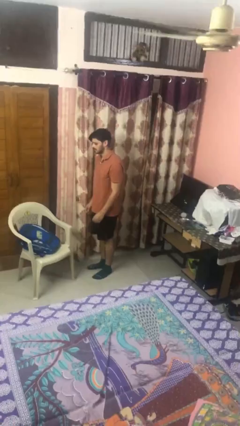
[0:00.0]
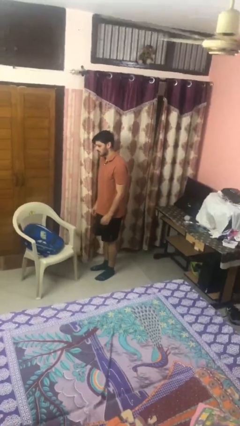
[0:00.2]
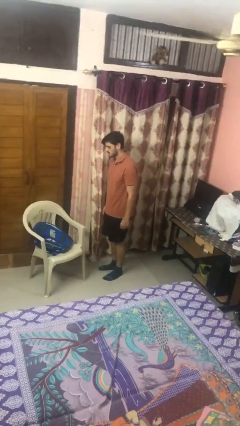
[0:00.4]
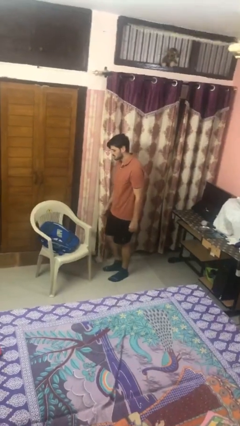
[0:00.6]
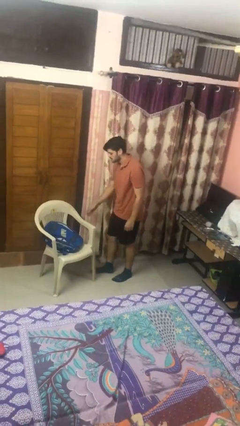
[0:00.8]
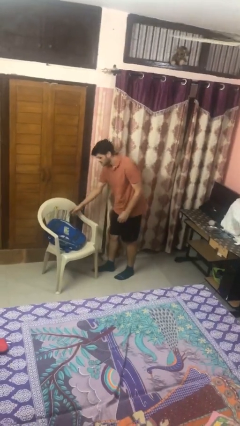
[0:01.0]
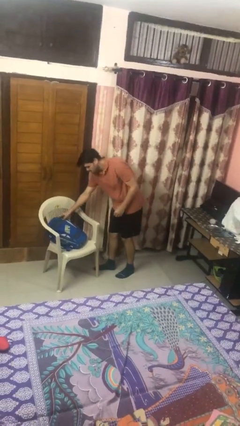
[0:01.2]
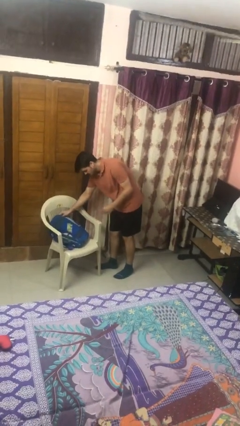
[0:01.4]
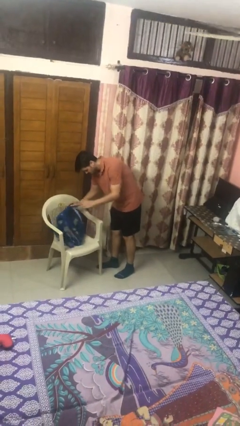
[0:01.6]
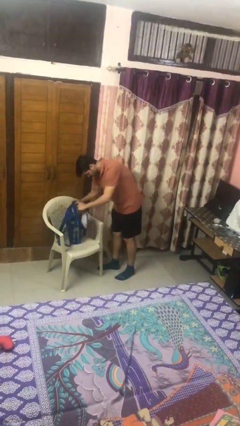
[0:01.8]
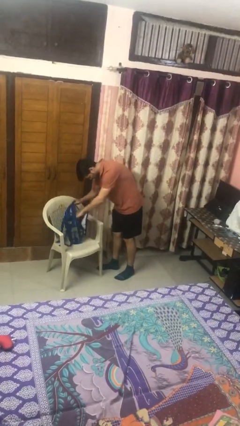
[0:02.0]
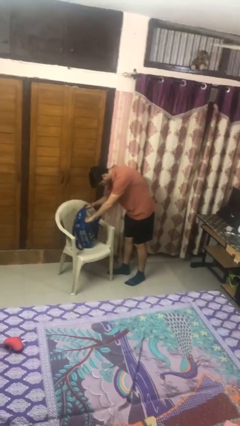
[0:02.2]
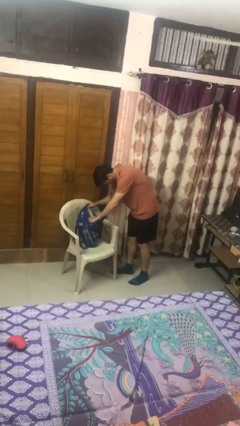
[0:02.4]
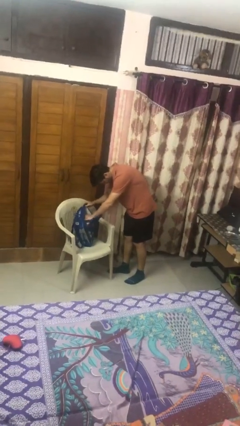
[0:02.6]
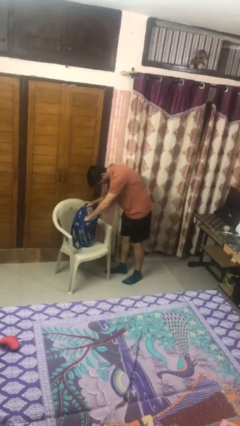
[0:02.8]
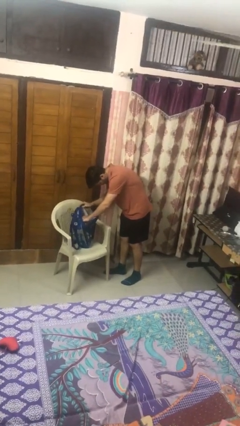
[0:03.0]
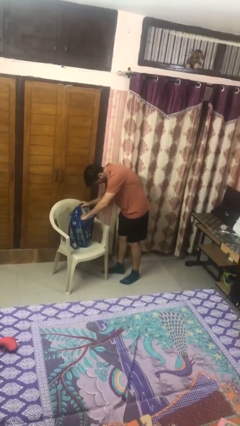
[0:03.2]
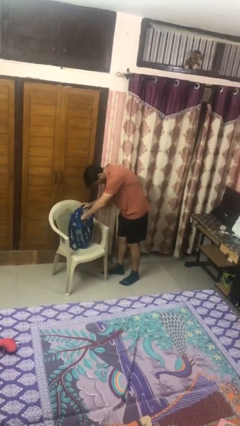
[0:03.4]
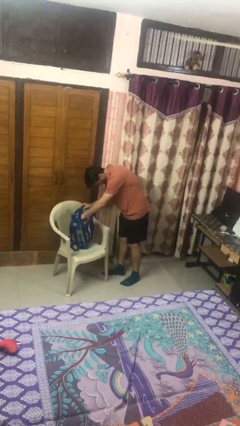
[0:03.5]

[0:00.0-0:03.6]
person searches in bag

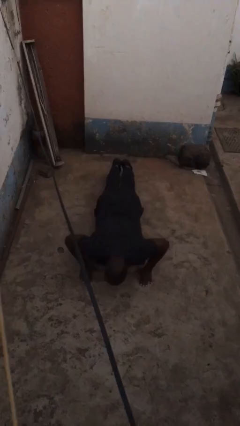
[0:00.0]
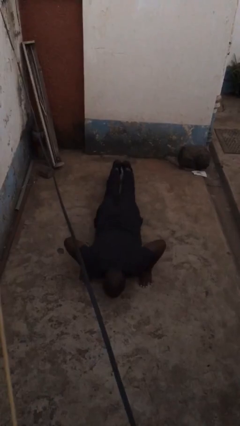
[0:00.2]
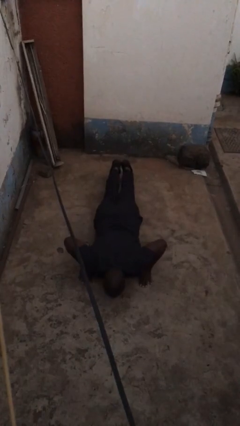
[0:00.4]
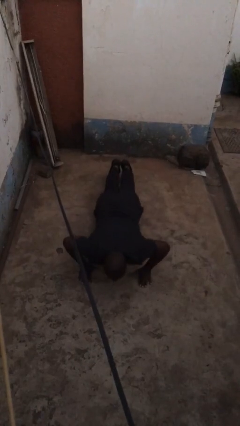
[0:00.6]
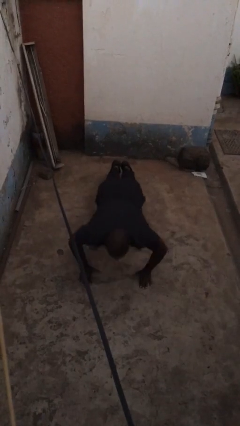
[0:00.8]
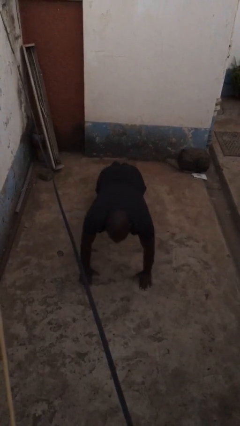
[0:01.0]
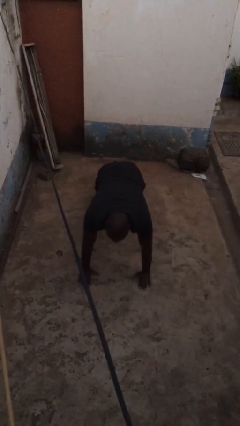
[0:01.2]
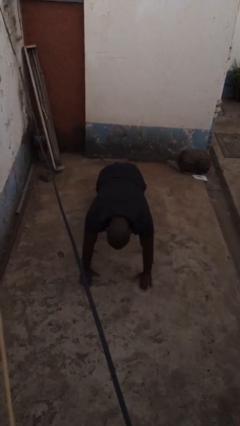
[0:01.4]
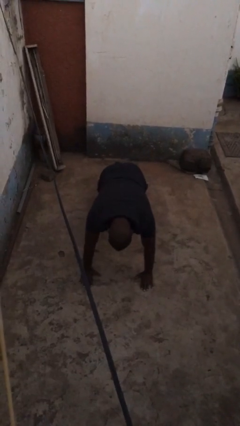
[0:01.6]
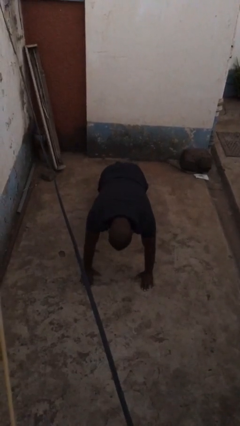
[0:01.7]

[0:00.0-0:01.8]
person exercises with pushup

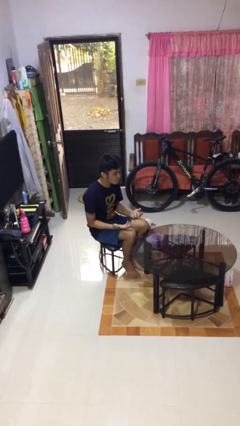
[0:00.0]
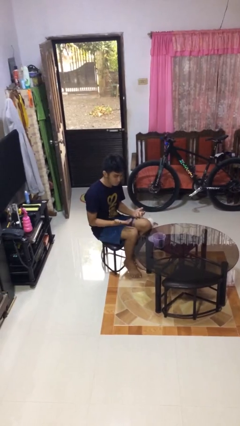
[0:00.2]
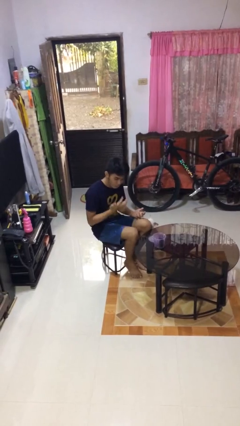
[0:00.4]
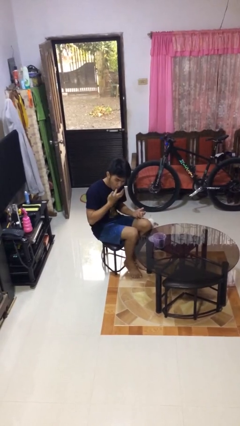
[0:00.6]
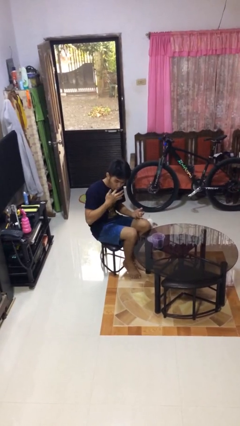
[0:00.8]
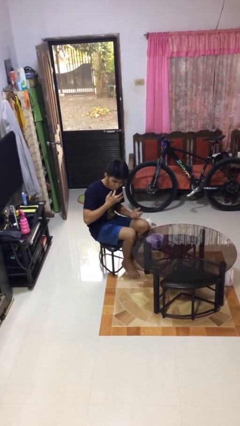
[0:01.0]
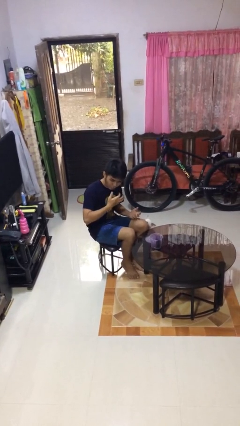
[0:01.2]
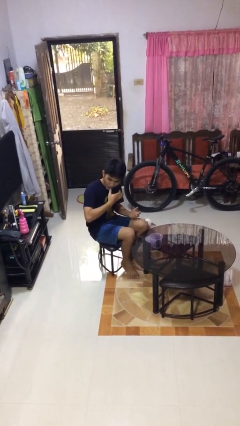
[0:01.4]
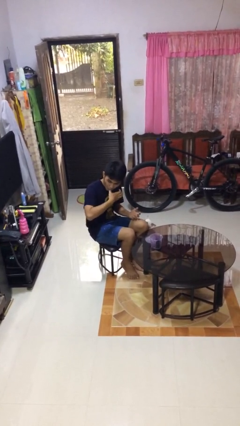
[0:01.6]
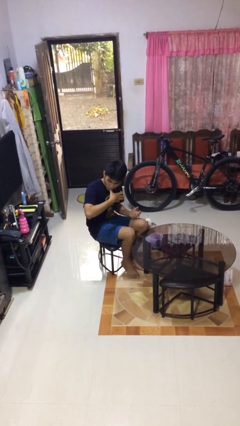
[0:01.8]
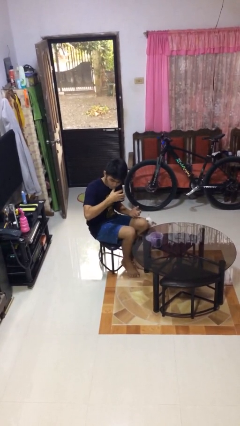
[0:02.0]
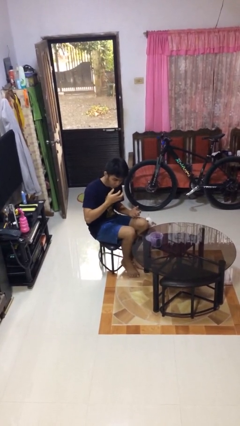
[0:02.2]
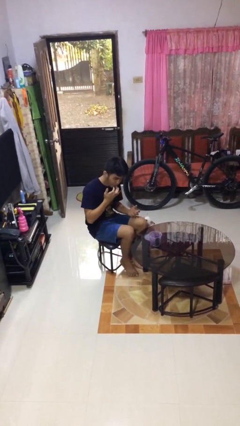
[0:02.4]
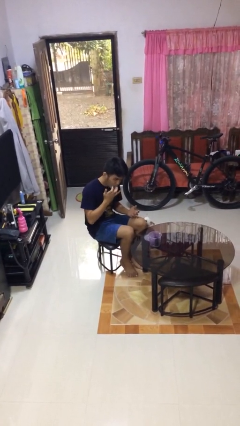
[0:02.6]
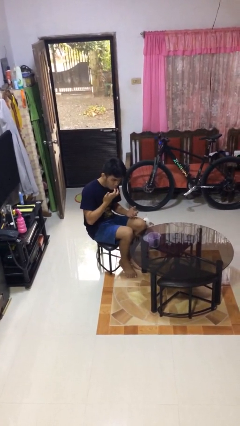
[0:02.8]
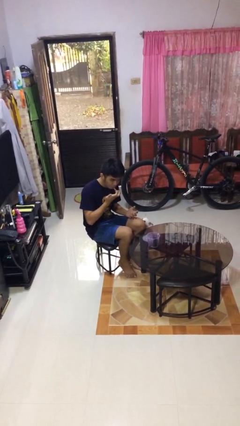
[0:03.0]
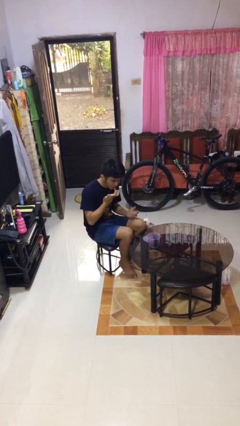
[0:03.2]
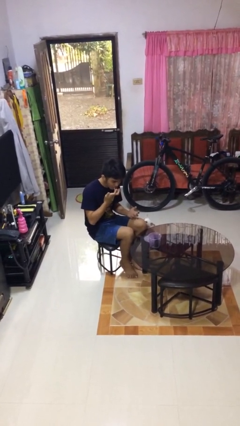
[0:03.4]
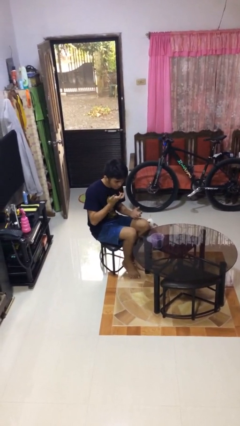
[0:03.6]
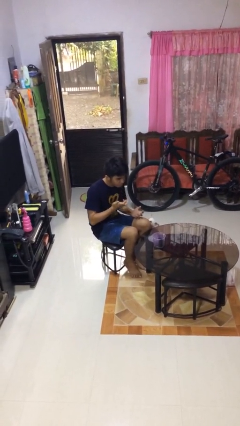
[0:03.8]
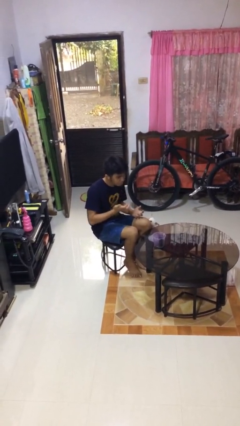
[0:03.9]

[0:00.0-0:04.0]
person licks fingers

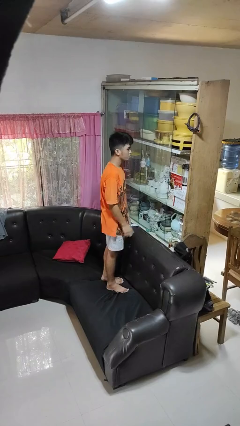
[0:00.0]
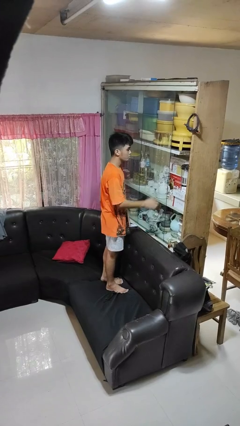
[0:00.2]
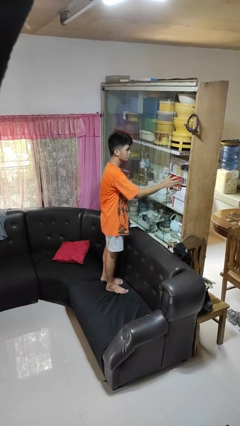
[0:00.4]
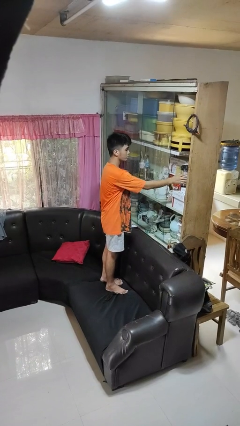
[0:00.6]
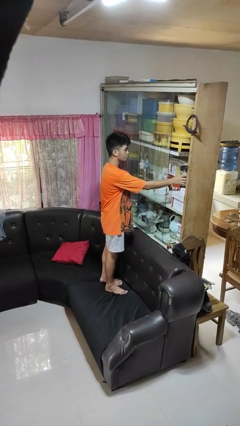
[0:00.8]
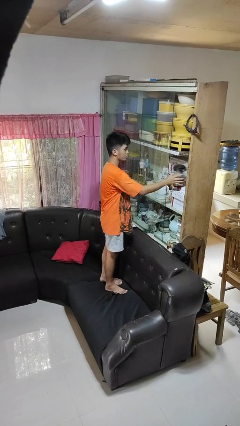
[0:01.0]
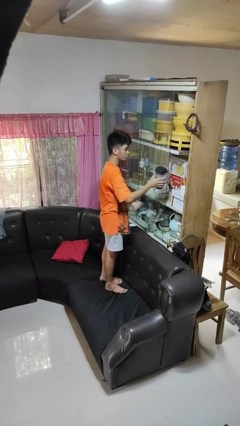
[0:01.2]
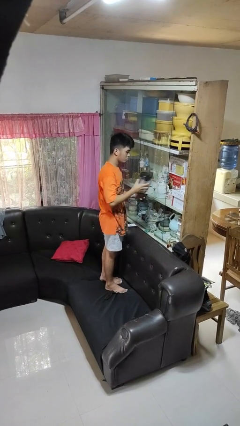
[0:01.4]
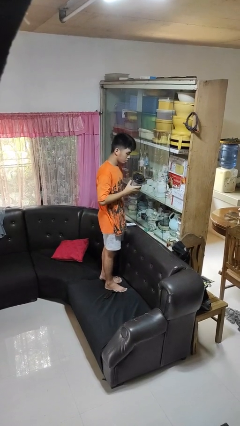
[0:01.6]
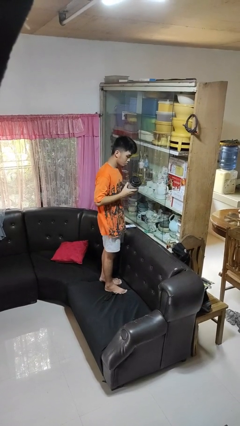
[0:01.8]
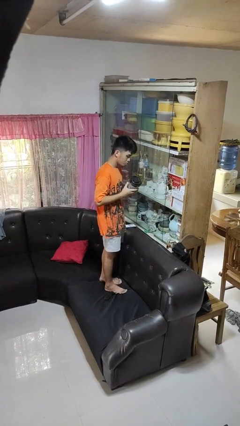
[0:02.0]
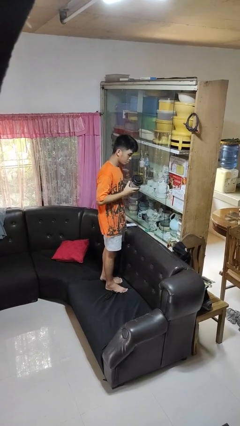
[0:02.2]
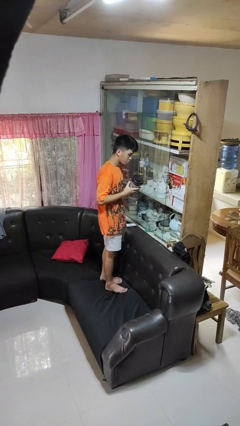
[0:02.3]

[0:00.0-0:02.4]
person picks up object from cabinet

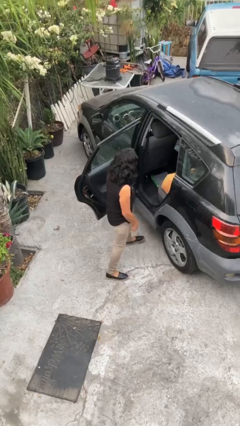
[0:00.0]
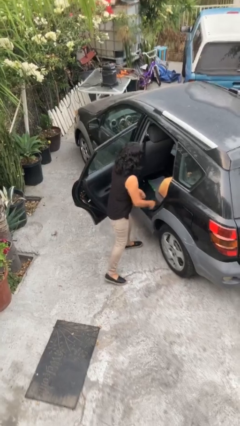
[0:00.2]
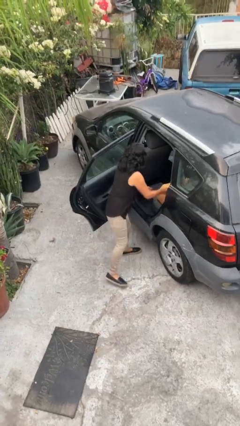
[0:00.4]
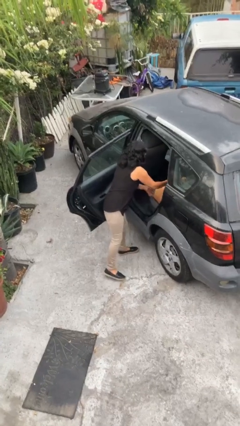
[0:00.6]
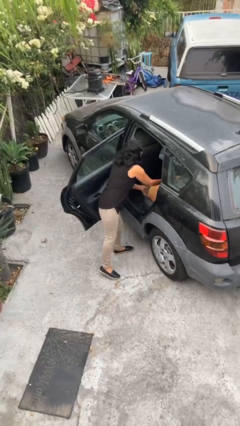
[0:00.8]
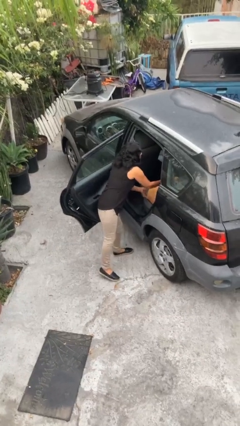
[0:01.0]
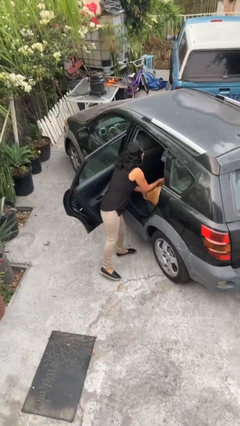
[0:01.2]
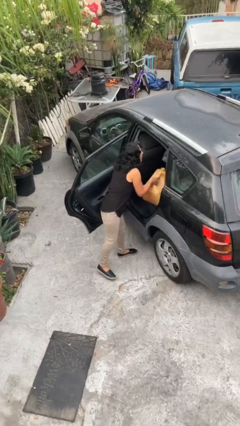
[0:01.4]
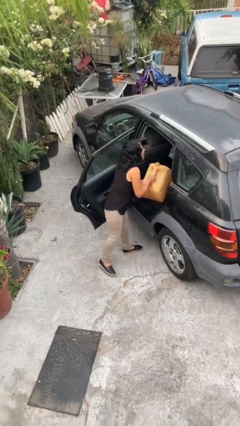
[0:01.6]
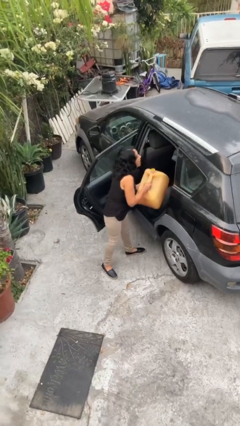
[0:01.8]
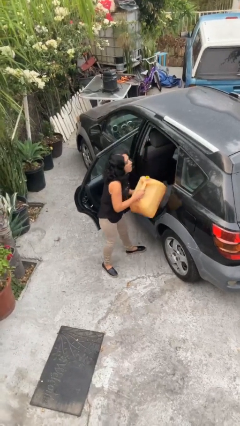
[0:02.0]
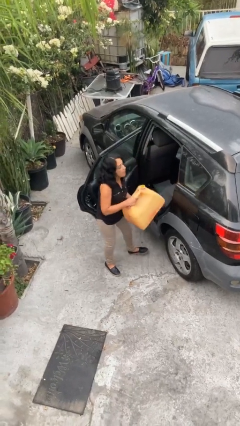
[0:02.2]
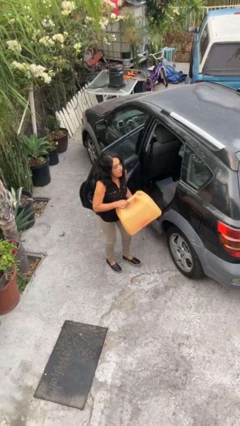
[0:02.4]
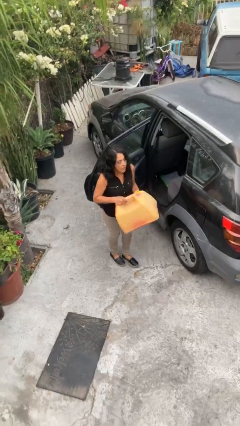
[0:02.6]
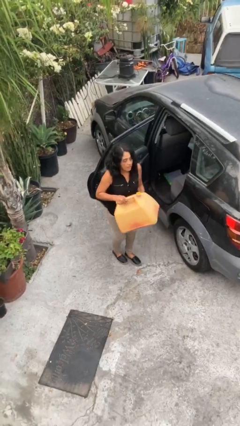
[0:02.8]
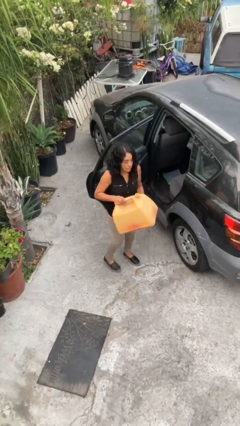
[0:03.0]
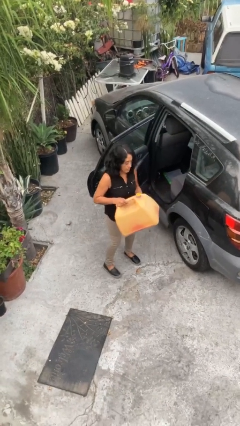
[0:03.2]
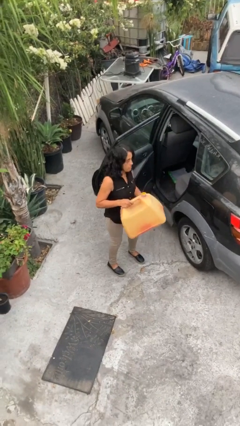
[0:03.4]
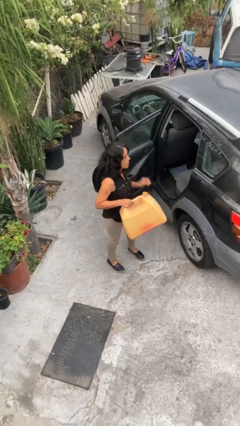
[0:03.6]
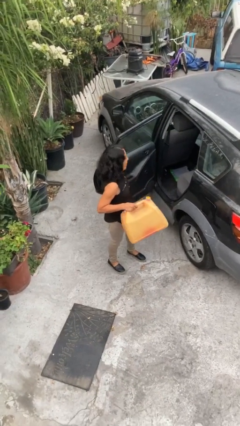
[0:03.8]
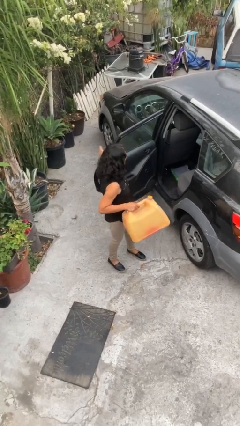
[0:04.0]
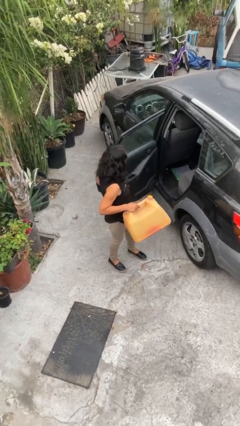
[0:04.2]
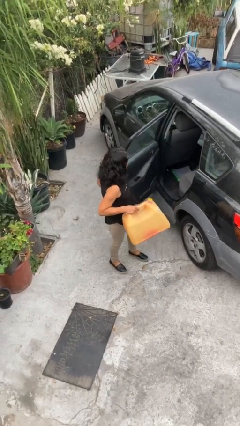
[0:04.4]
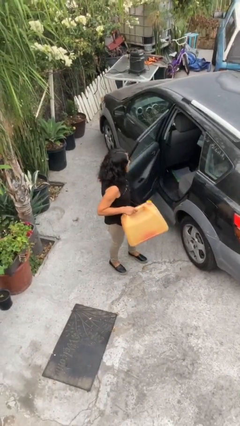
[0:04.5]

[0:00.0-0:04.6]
person unloads car

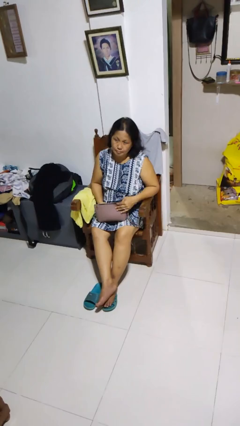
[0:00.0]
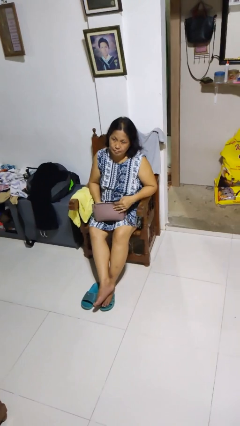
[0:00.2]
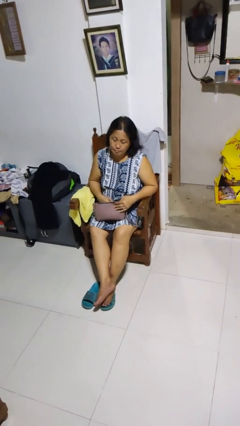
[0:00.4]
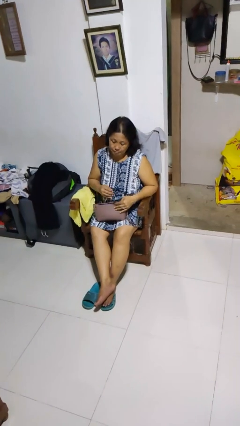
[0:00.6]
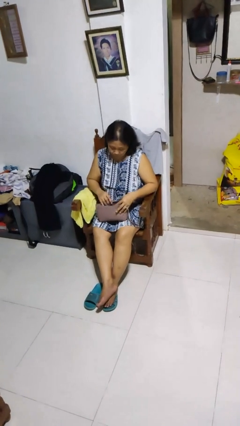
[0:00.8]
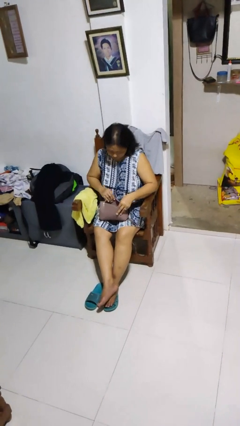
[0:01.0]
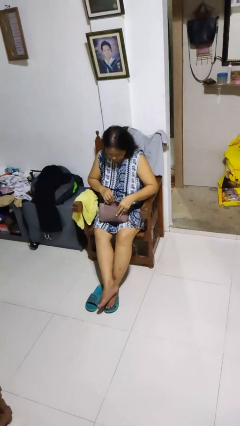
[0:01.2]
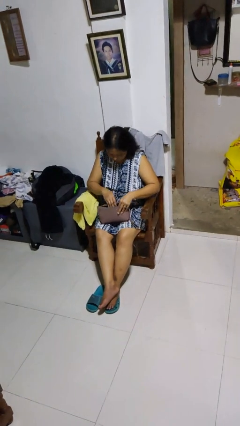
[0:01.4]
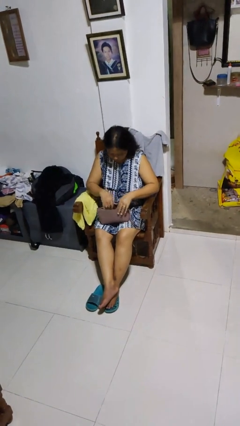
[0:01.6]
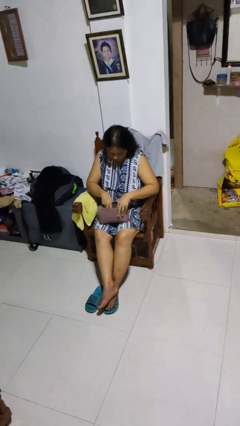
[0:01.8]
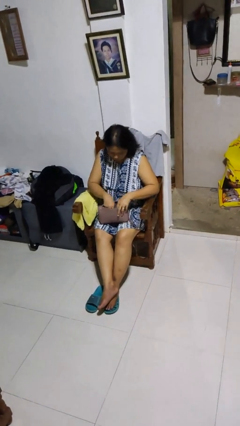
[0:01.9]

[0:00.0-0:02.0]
person searches in purse
